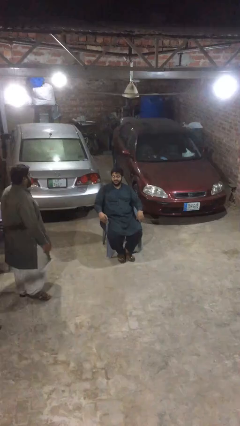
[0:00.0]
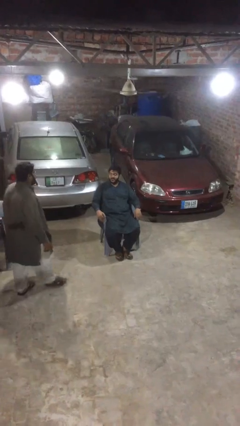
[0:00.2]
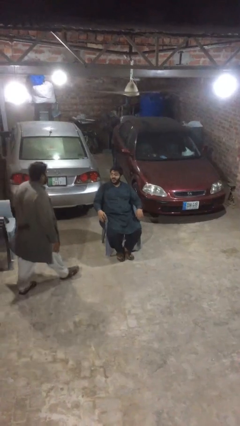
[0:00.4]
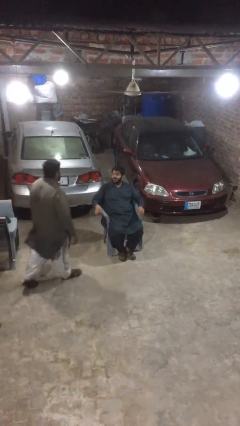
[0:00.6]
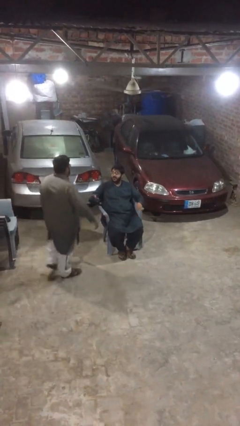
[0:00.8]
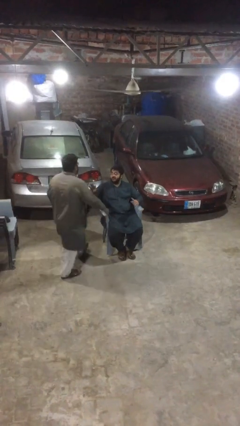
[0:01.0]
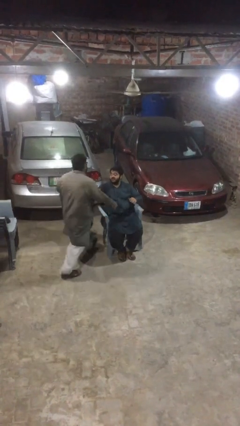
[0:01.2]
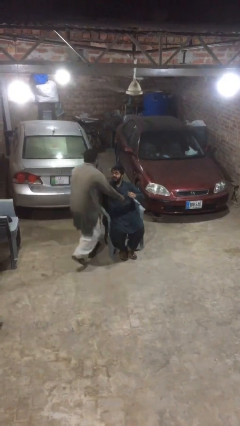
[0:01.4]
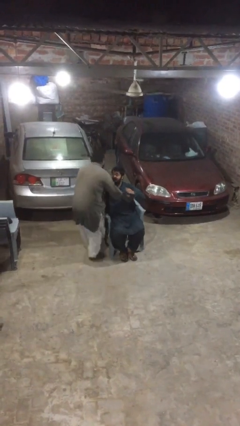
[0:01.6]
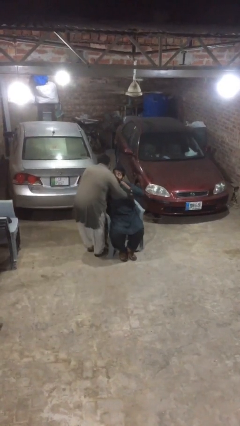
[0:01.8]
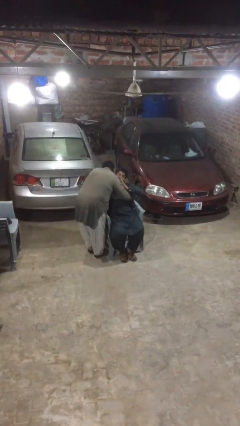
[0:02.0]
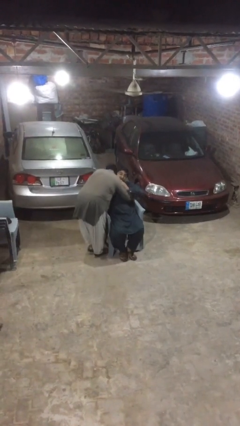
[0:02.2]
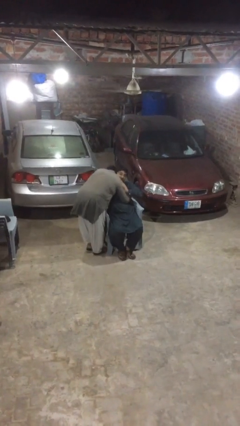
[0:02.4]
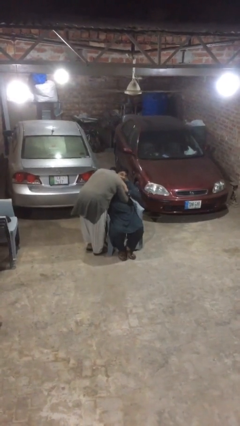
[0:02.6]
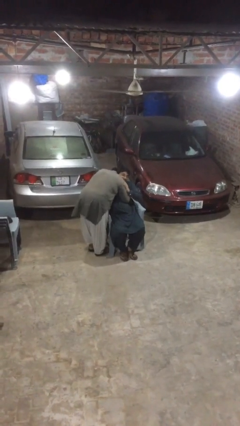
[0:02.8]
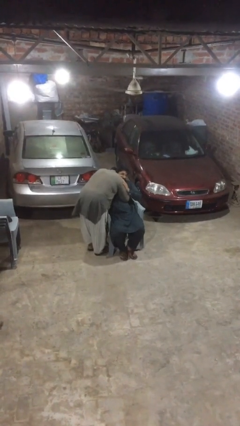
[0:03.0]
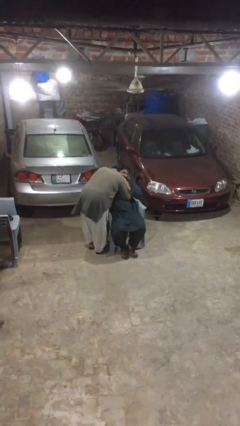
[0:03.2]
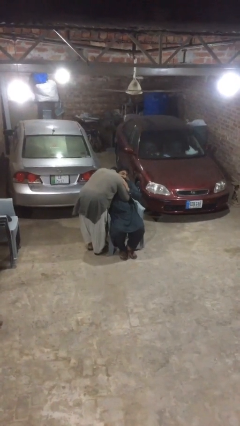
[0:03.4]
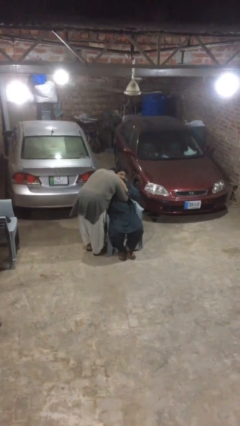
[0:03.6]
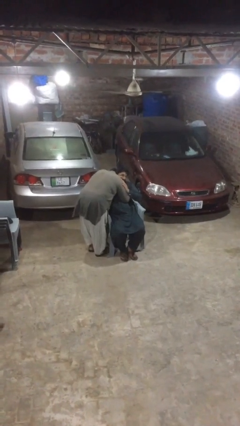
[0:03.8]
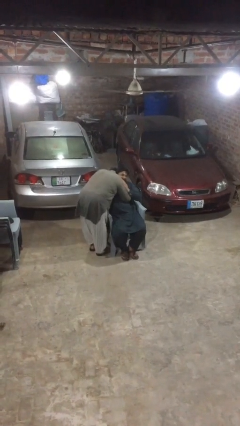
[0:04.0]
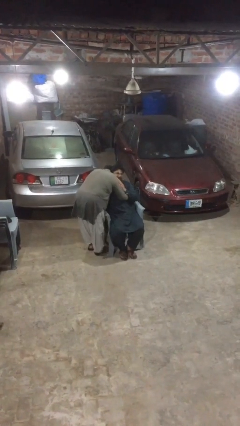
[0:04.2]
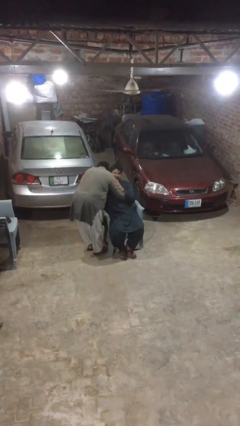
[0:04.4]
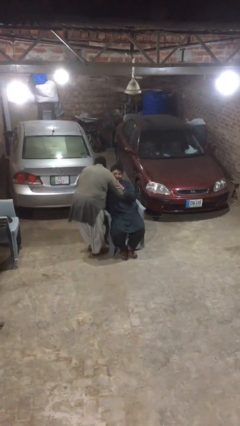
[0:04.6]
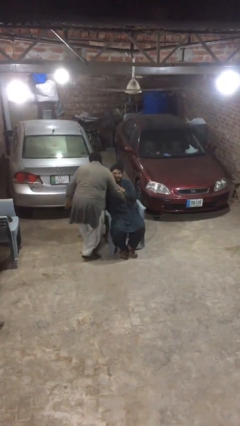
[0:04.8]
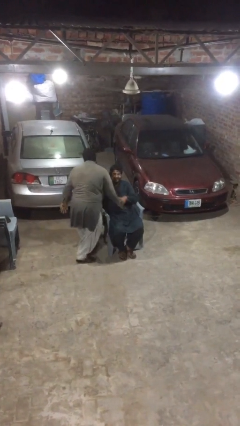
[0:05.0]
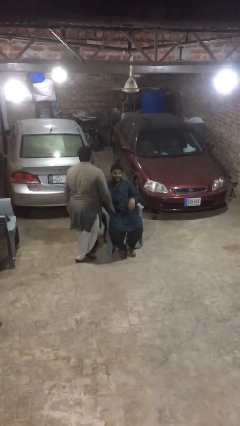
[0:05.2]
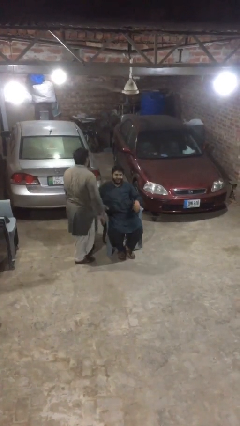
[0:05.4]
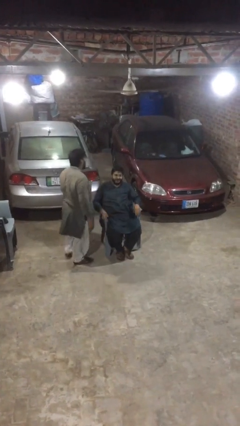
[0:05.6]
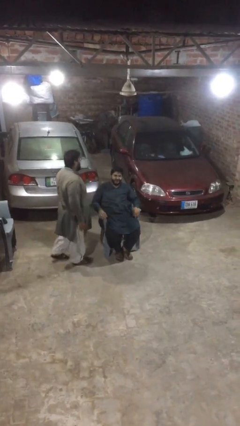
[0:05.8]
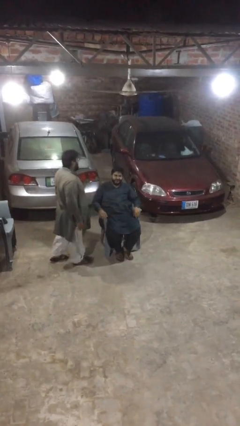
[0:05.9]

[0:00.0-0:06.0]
person embraces person

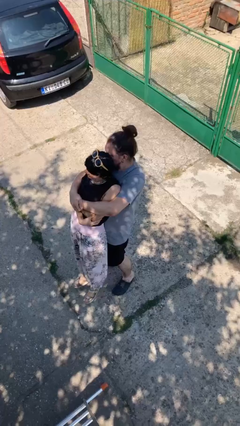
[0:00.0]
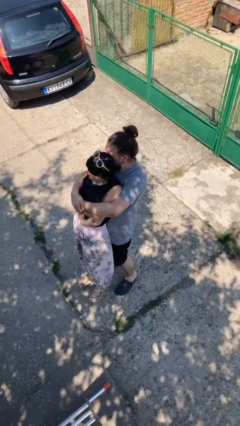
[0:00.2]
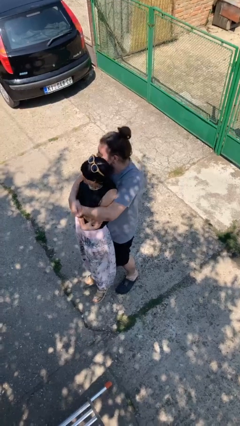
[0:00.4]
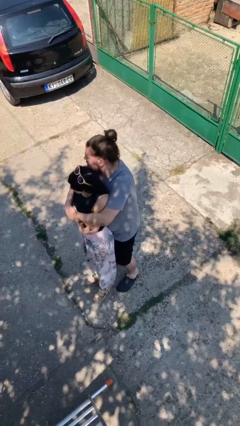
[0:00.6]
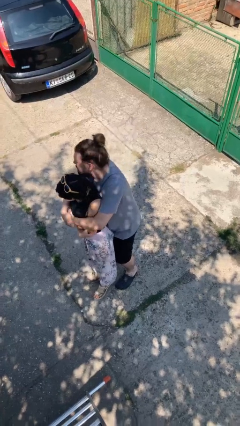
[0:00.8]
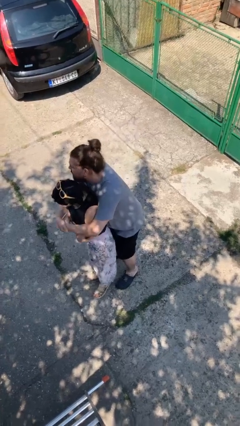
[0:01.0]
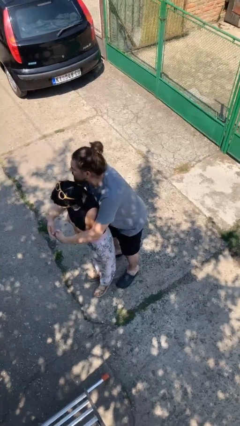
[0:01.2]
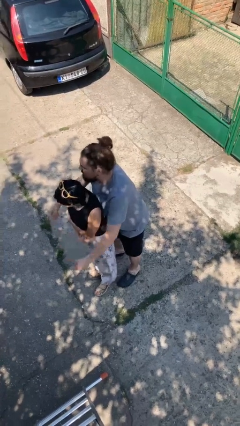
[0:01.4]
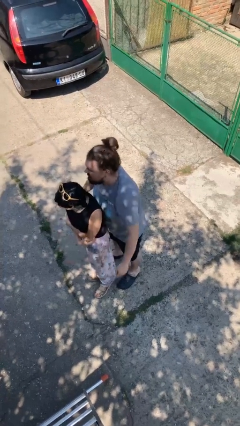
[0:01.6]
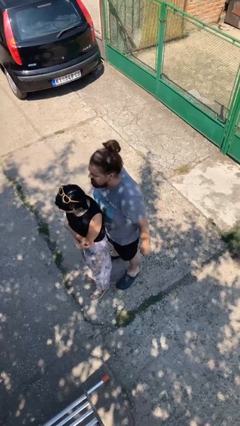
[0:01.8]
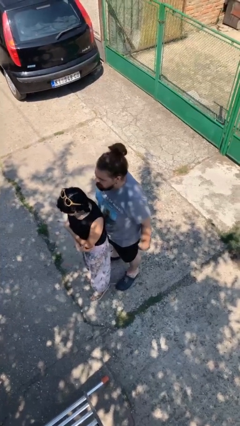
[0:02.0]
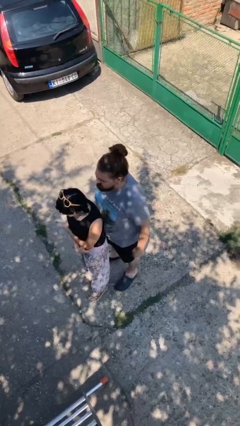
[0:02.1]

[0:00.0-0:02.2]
person puts down person

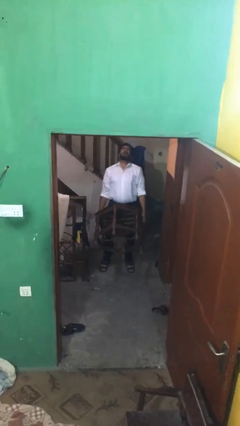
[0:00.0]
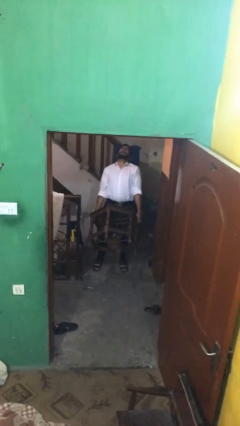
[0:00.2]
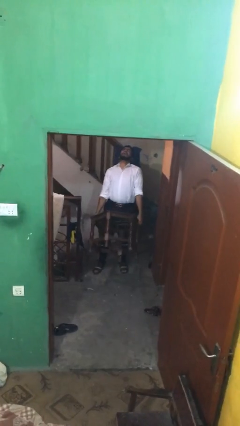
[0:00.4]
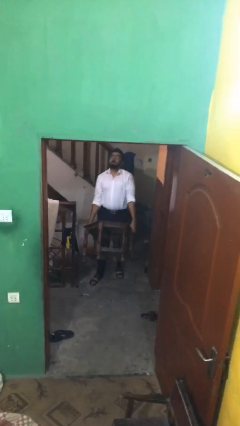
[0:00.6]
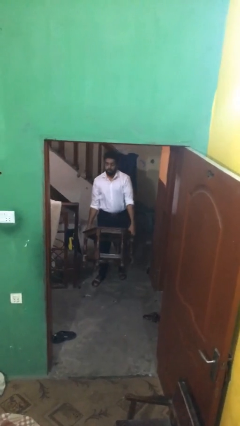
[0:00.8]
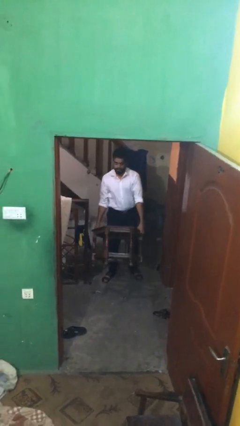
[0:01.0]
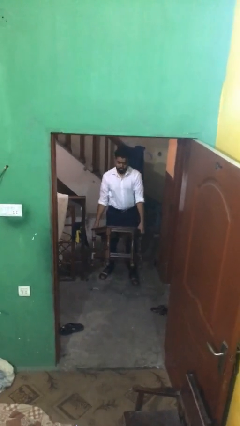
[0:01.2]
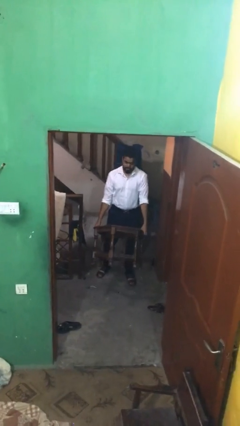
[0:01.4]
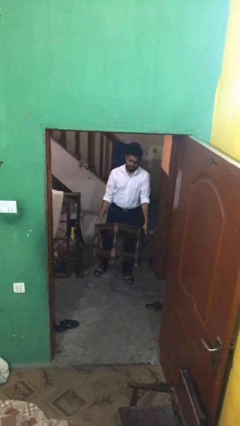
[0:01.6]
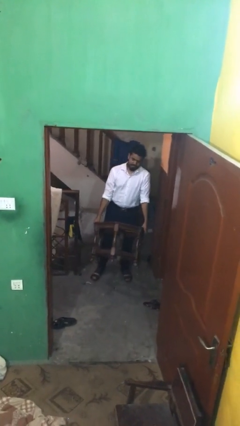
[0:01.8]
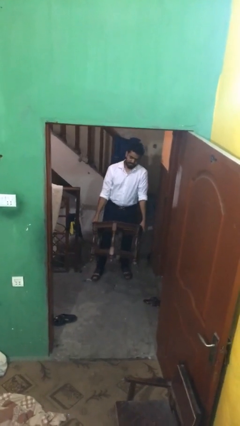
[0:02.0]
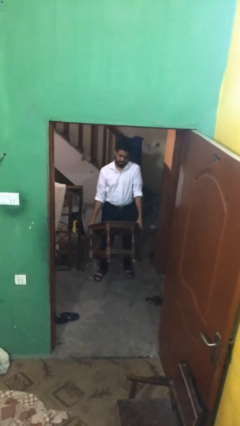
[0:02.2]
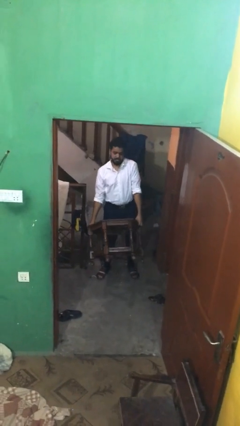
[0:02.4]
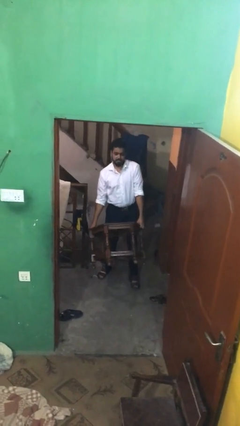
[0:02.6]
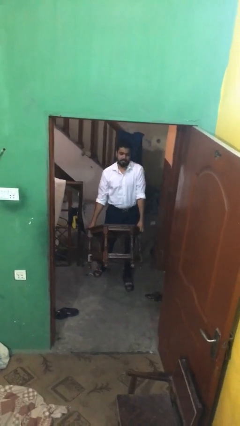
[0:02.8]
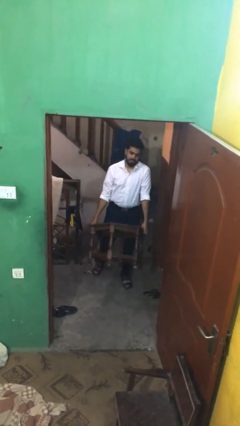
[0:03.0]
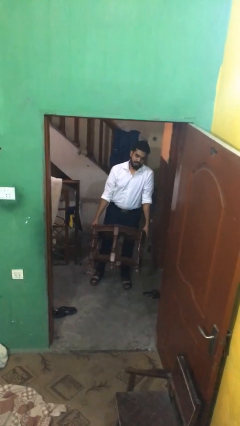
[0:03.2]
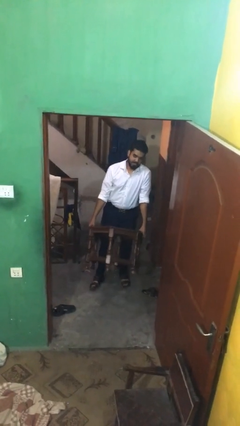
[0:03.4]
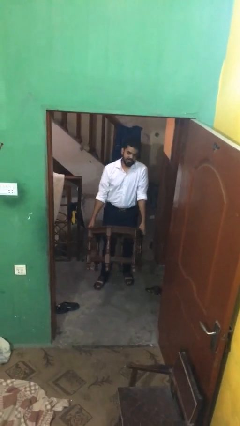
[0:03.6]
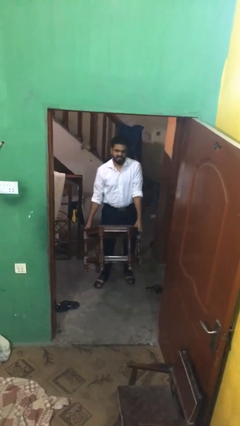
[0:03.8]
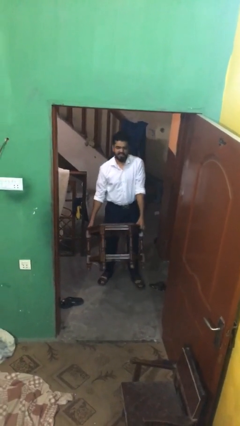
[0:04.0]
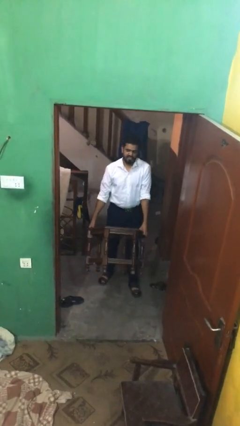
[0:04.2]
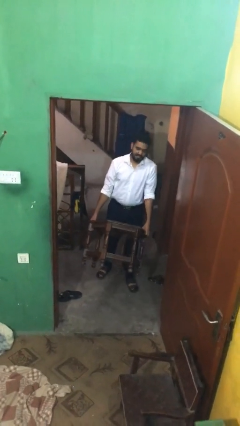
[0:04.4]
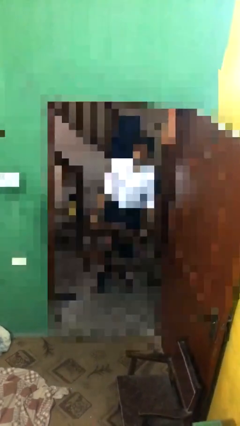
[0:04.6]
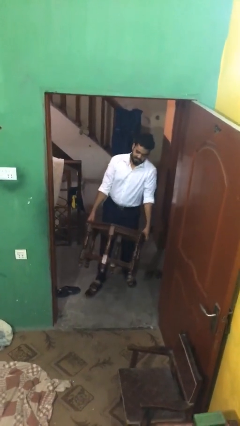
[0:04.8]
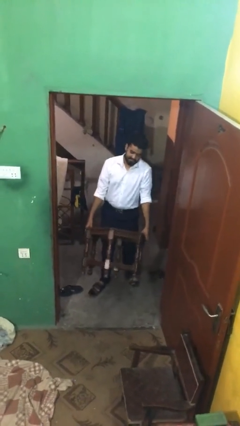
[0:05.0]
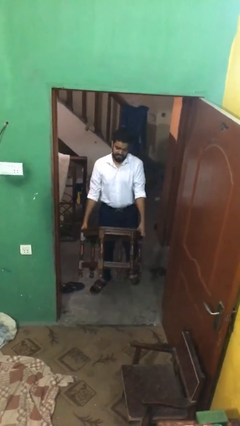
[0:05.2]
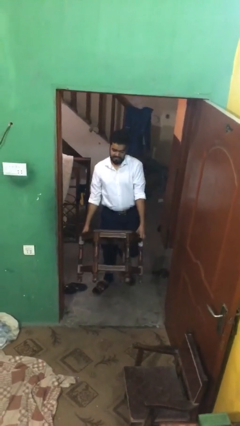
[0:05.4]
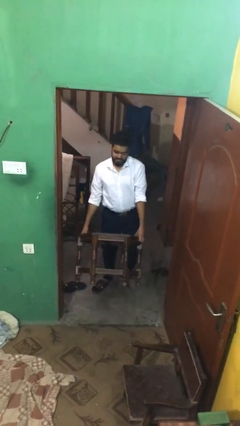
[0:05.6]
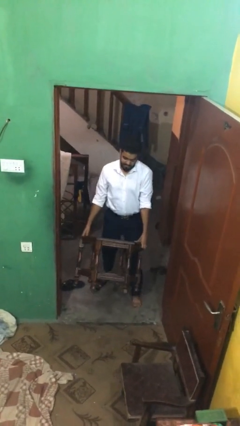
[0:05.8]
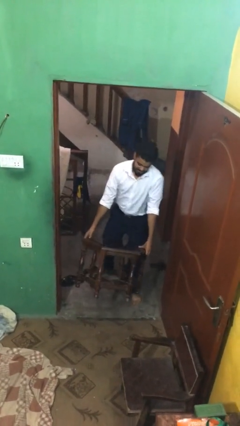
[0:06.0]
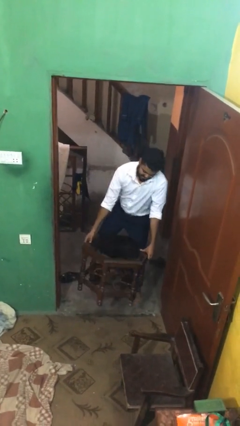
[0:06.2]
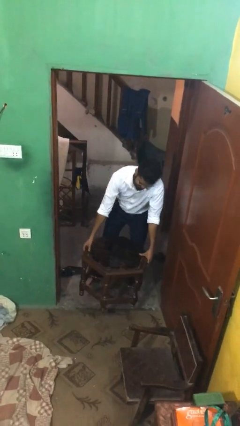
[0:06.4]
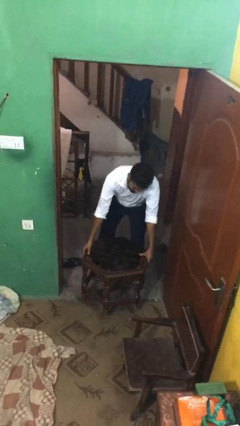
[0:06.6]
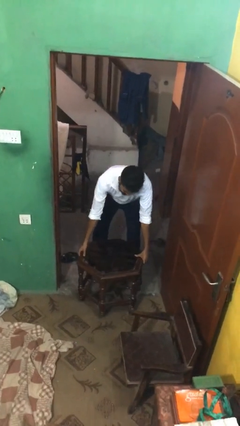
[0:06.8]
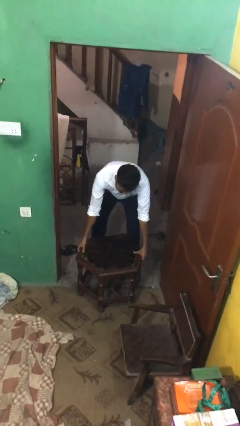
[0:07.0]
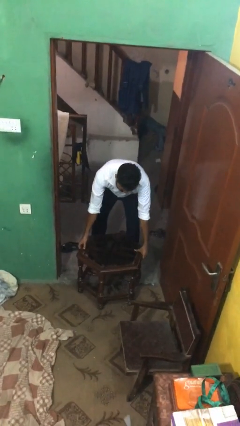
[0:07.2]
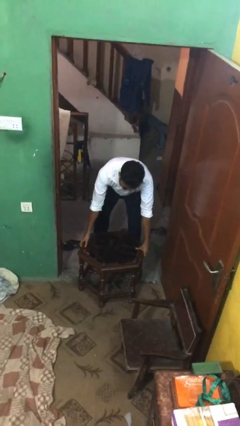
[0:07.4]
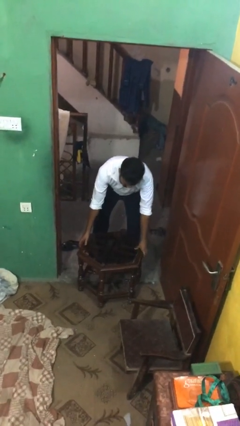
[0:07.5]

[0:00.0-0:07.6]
person carries heavy object

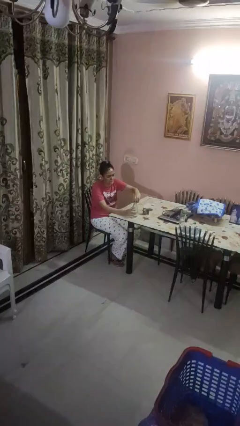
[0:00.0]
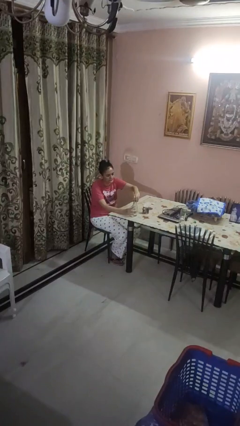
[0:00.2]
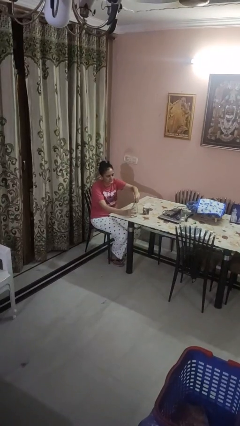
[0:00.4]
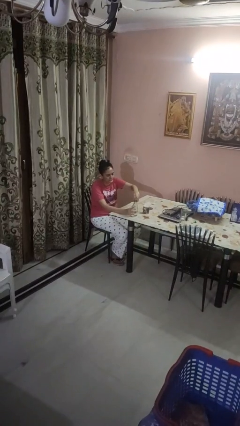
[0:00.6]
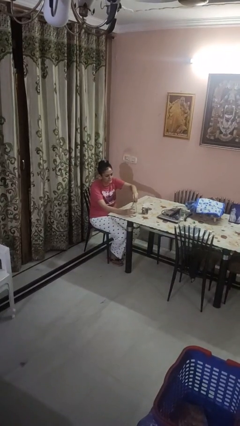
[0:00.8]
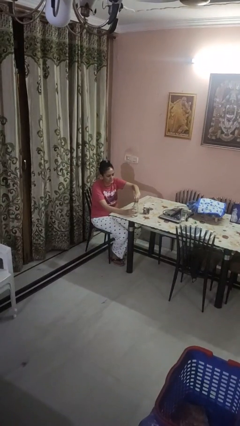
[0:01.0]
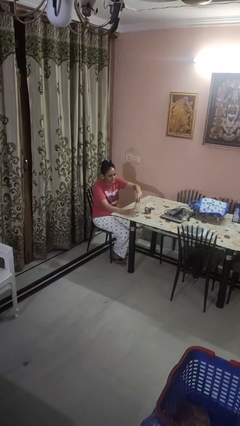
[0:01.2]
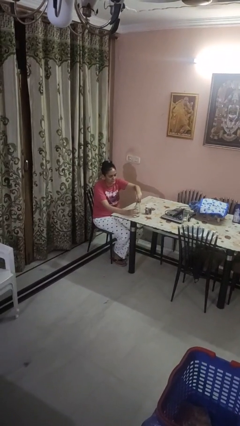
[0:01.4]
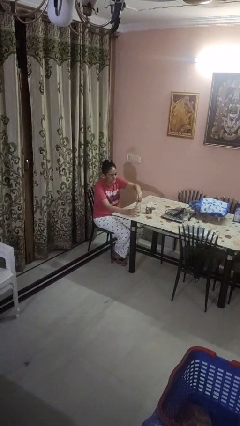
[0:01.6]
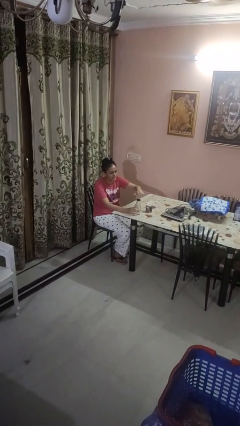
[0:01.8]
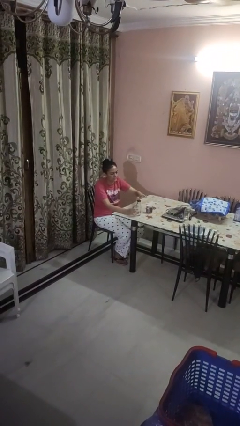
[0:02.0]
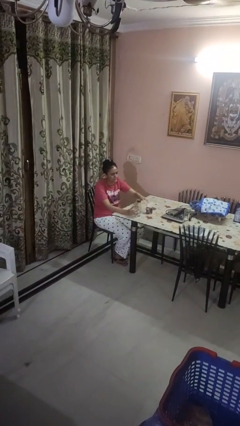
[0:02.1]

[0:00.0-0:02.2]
person screws lid to bottle
